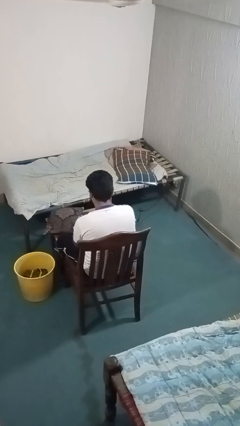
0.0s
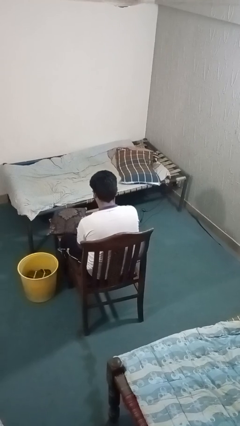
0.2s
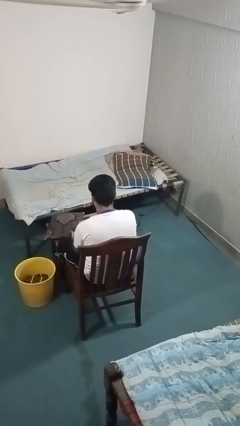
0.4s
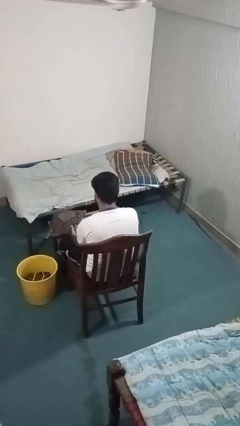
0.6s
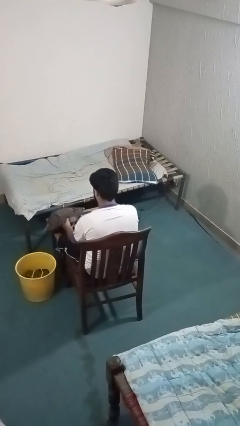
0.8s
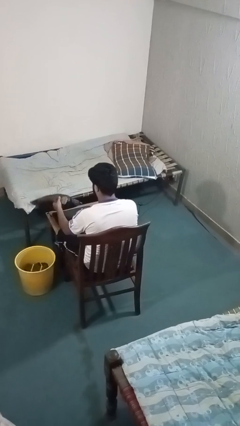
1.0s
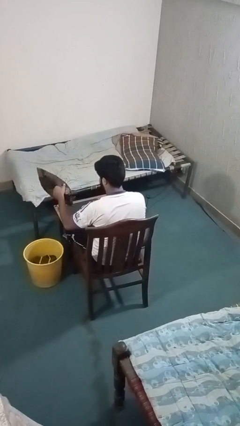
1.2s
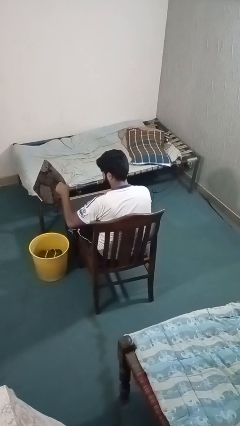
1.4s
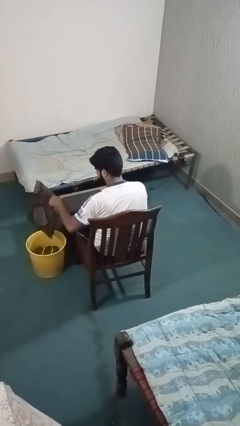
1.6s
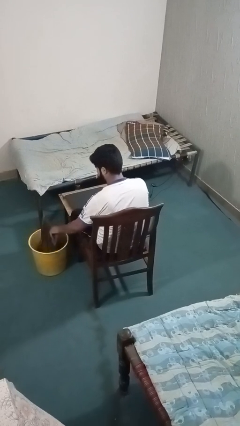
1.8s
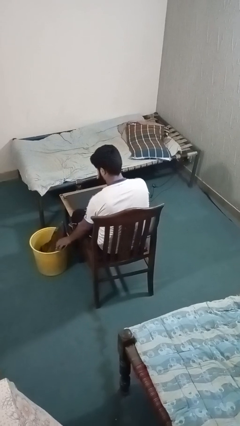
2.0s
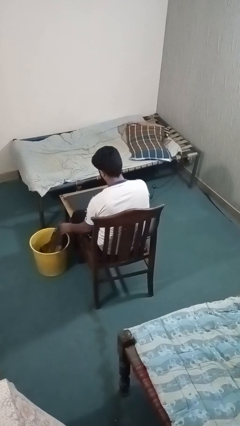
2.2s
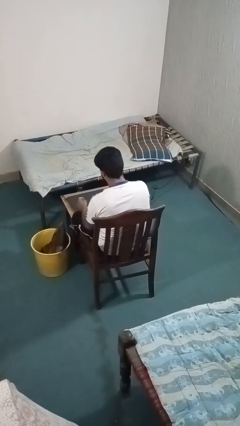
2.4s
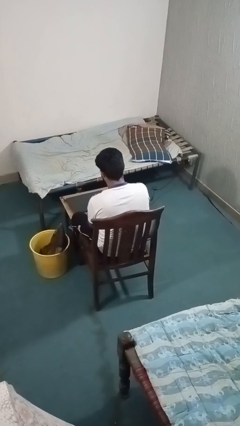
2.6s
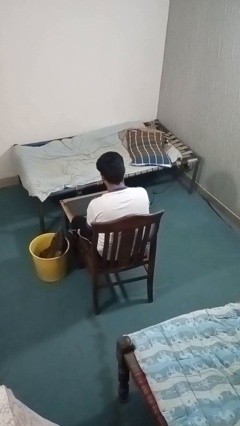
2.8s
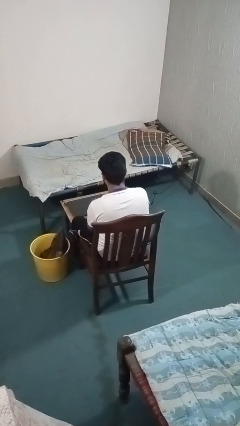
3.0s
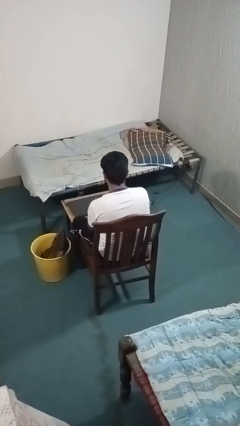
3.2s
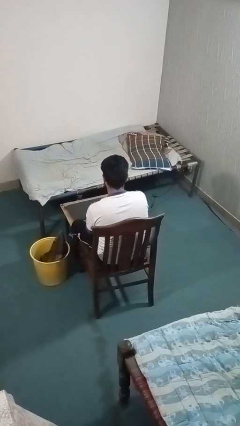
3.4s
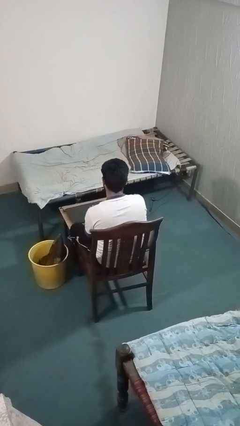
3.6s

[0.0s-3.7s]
person puts object into basket

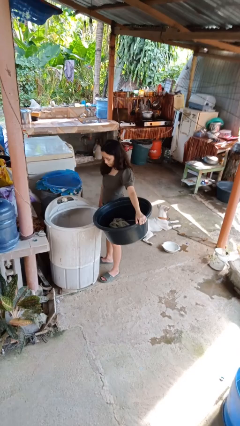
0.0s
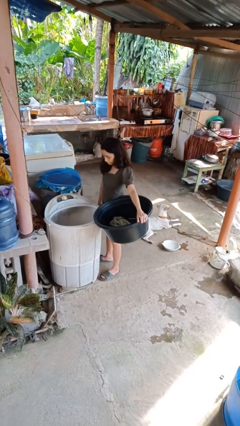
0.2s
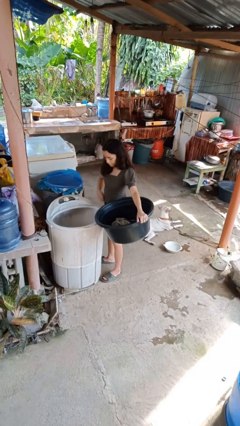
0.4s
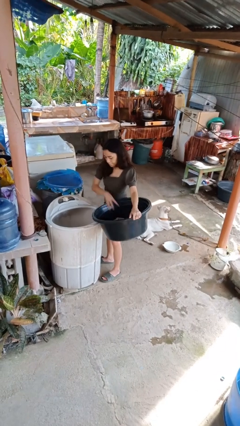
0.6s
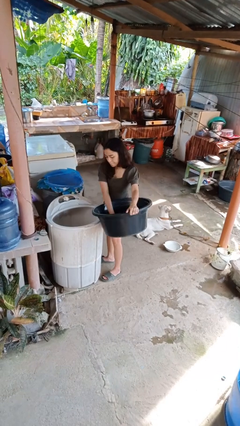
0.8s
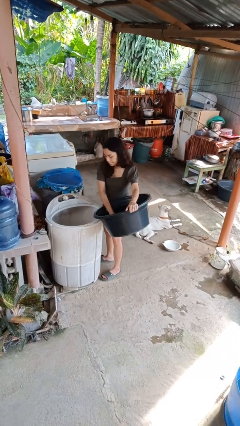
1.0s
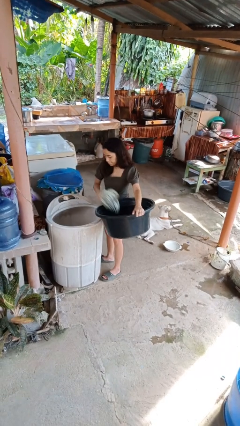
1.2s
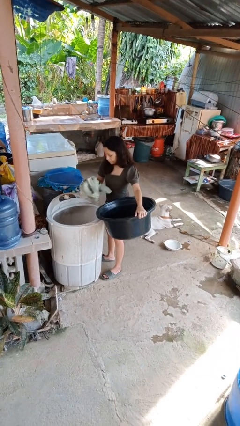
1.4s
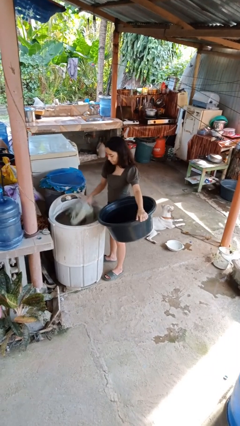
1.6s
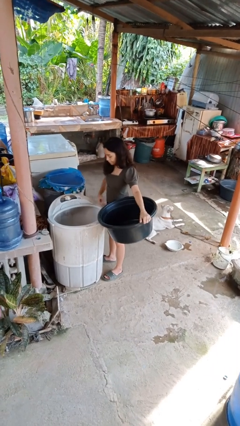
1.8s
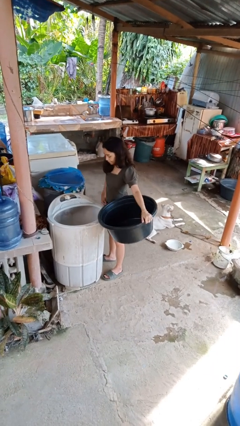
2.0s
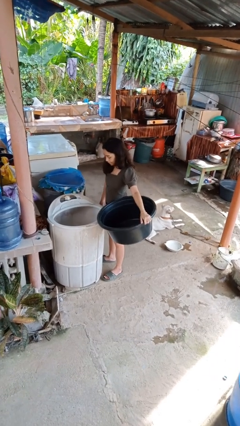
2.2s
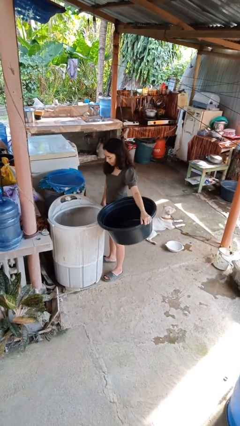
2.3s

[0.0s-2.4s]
person loads clotheswasher

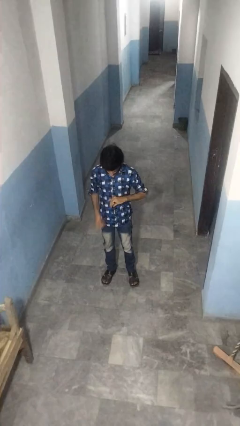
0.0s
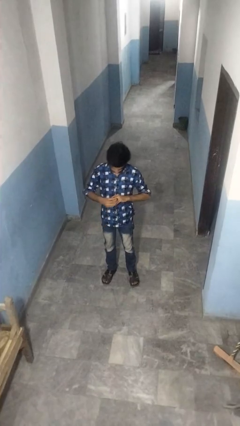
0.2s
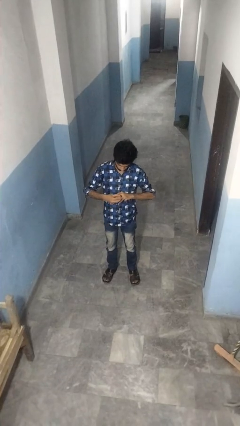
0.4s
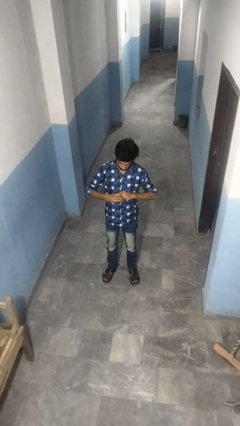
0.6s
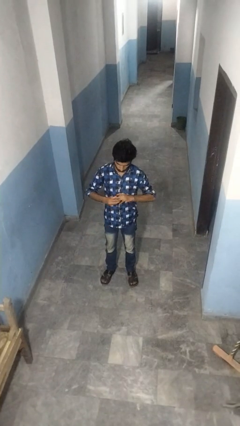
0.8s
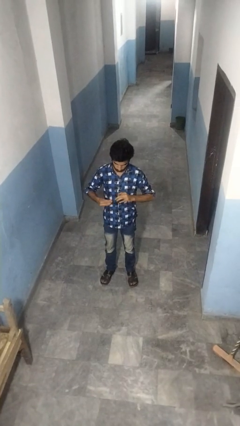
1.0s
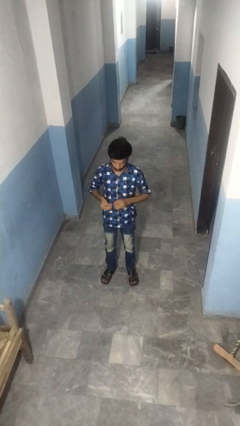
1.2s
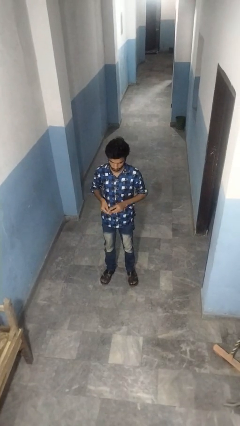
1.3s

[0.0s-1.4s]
person takes off ring

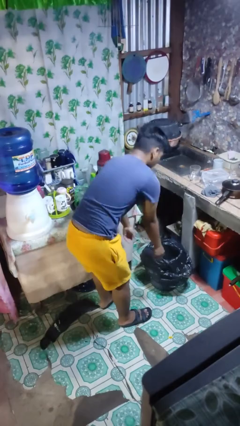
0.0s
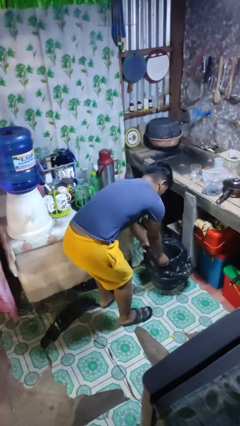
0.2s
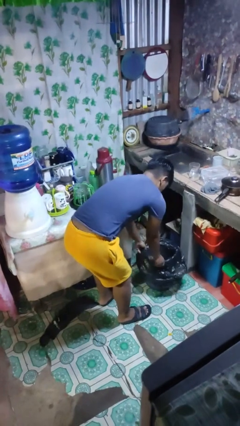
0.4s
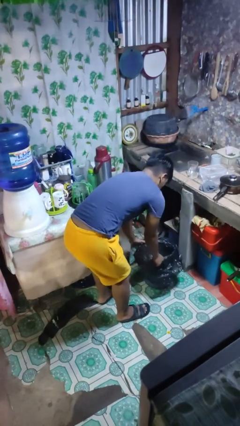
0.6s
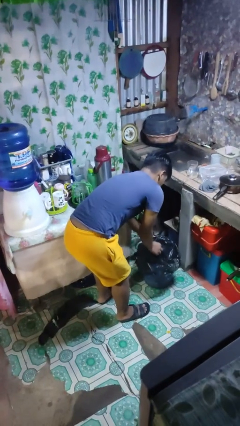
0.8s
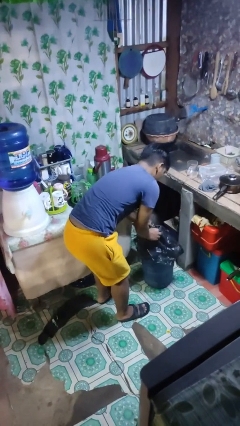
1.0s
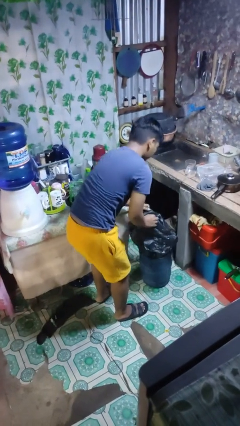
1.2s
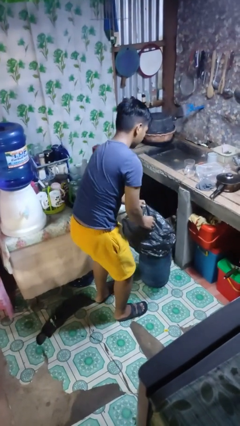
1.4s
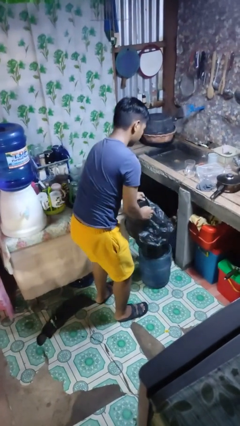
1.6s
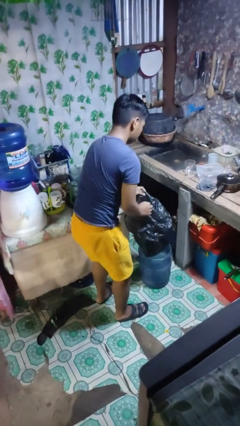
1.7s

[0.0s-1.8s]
person removes trashbag from trashcan

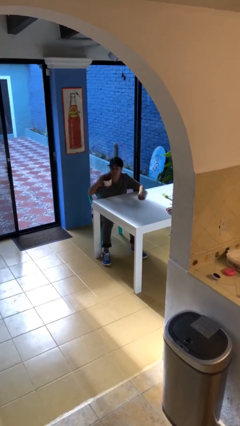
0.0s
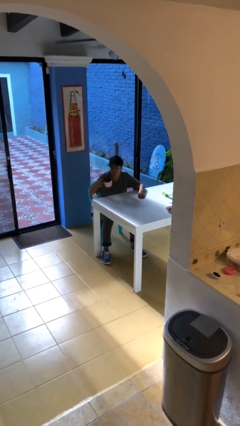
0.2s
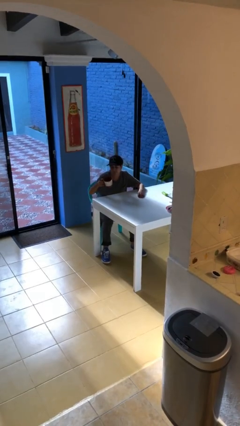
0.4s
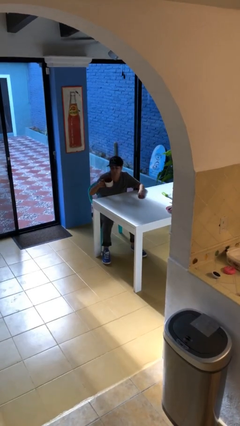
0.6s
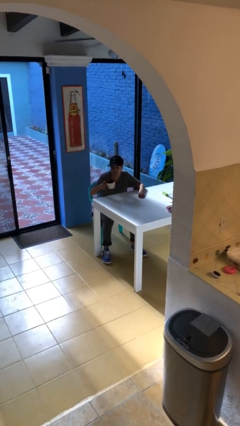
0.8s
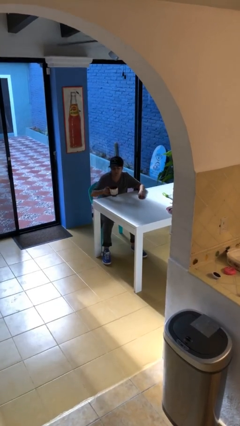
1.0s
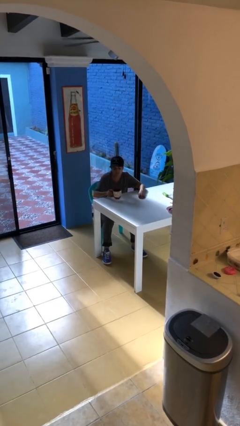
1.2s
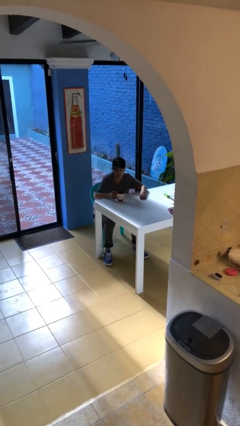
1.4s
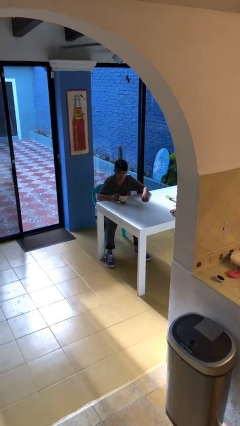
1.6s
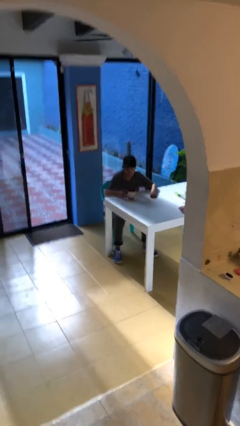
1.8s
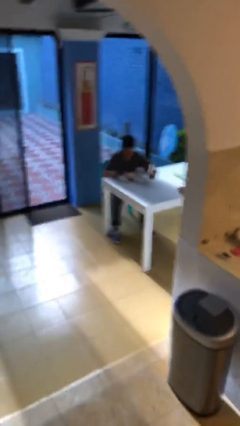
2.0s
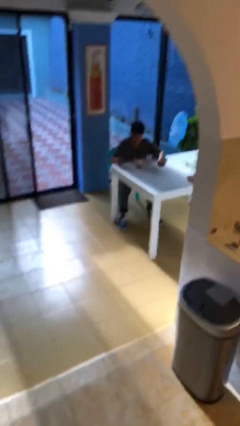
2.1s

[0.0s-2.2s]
person puts down object on table

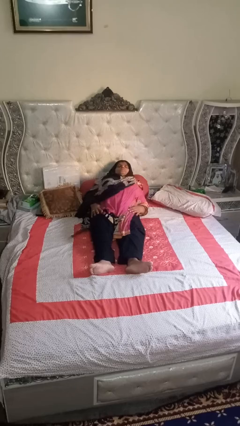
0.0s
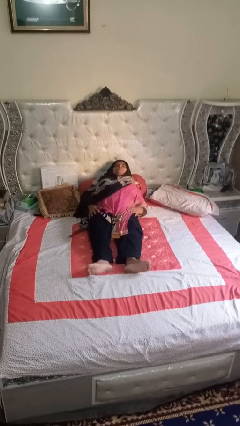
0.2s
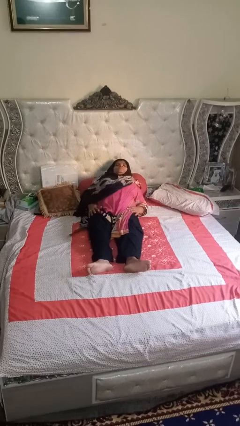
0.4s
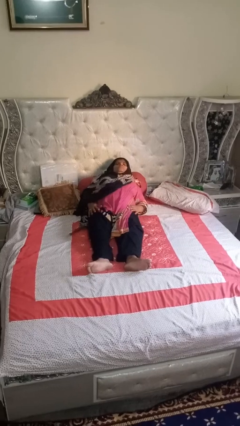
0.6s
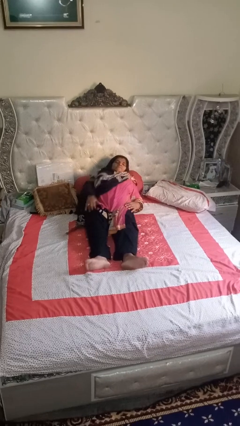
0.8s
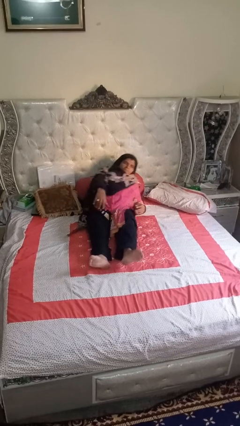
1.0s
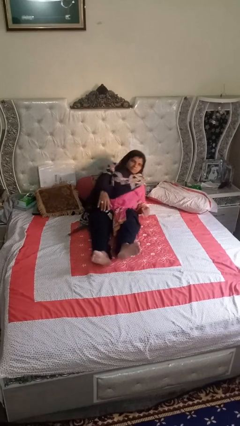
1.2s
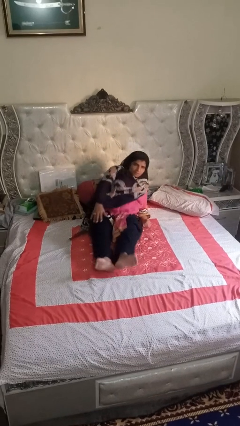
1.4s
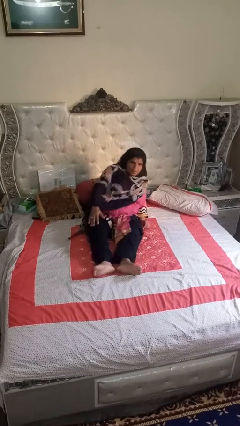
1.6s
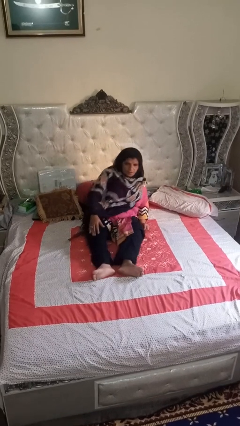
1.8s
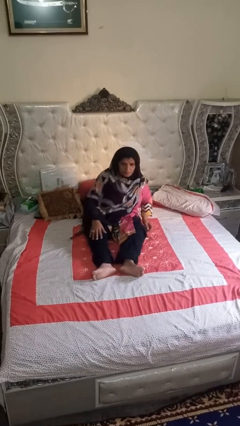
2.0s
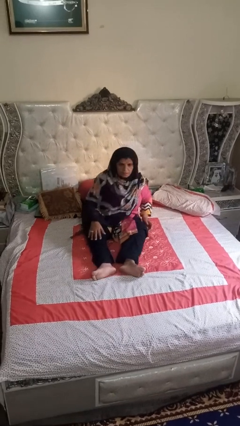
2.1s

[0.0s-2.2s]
person stands up

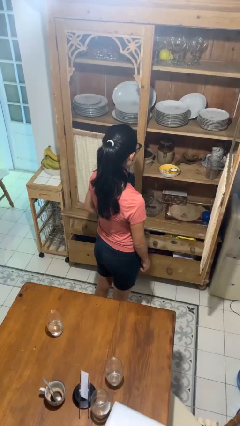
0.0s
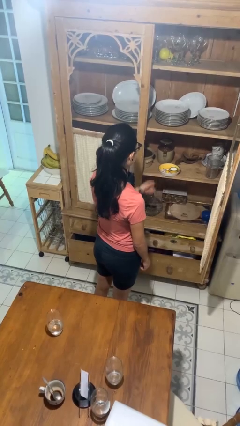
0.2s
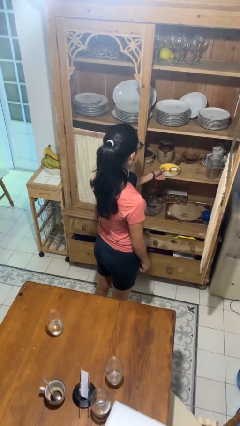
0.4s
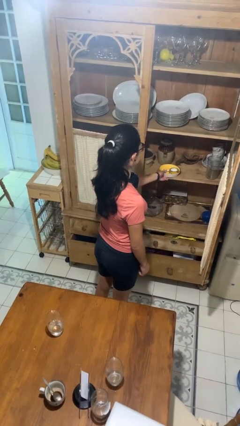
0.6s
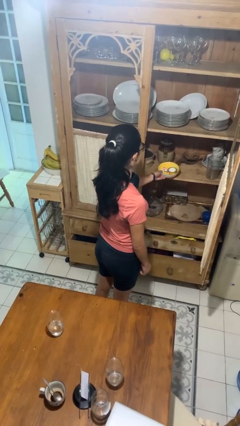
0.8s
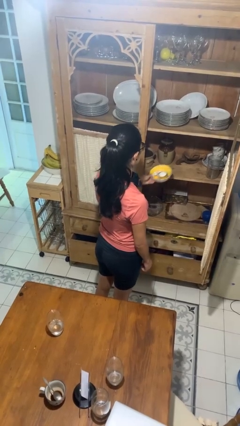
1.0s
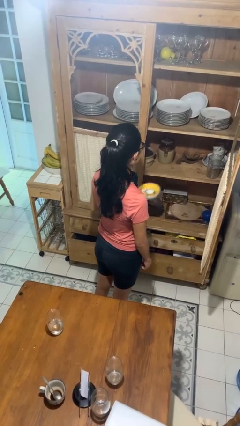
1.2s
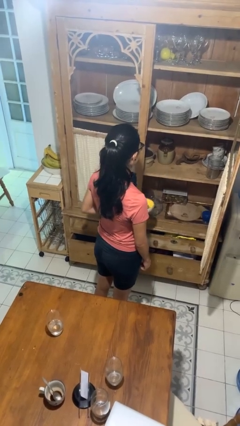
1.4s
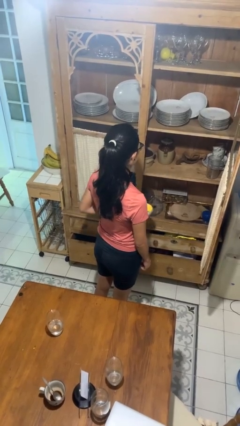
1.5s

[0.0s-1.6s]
person takes object from cabinet

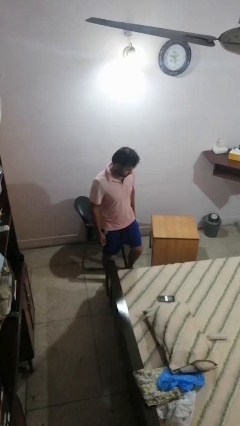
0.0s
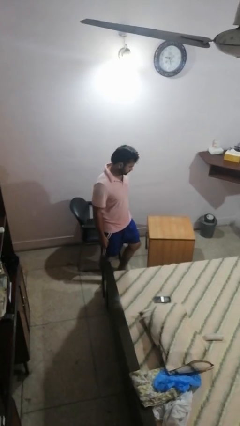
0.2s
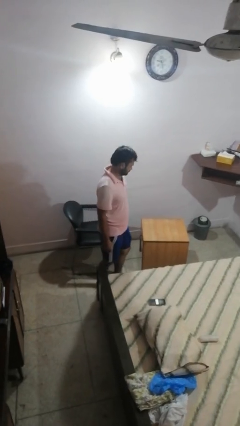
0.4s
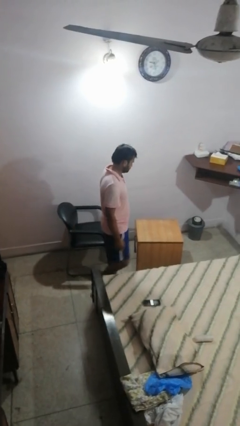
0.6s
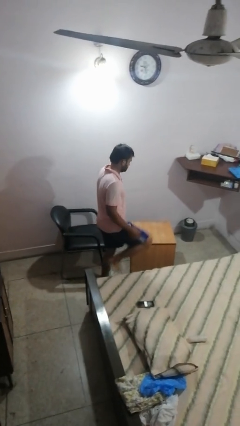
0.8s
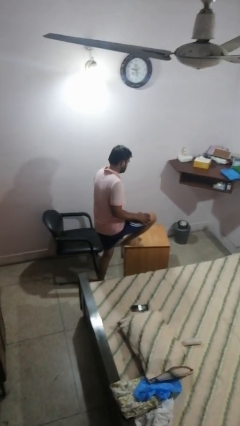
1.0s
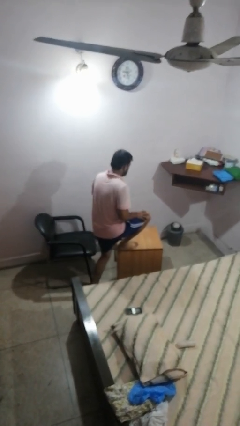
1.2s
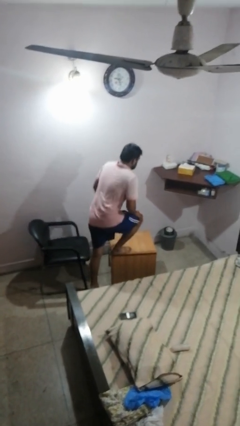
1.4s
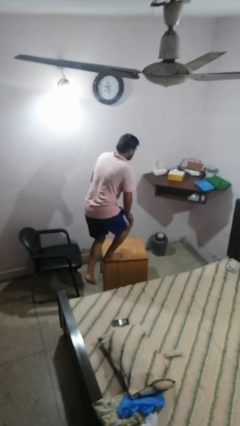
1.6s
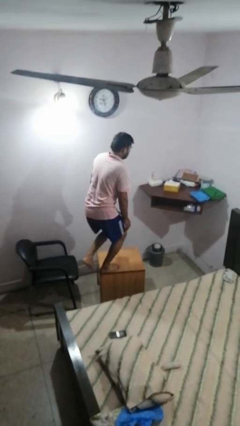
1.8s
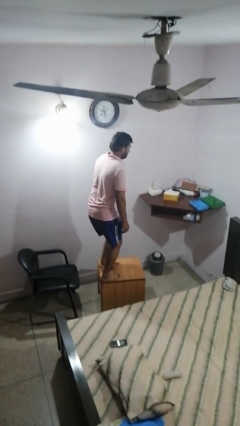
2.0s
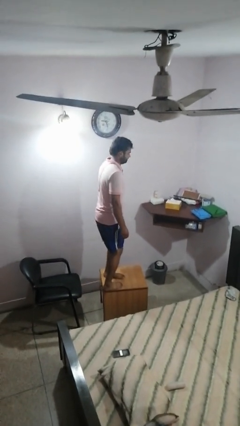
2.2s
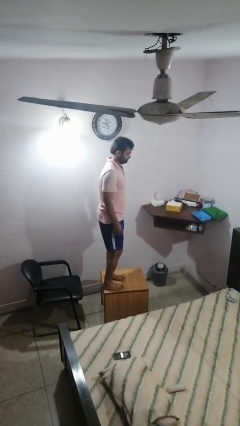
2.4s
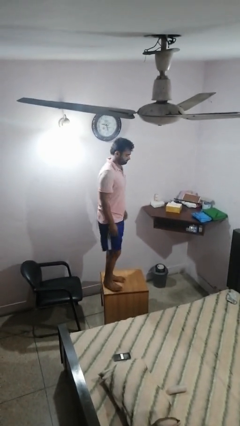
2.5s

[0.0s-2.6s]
person climbs on table
